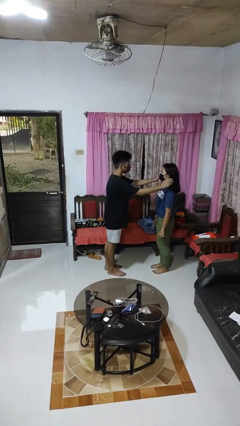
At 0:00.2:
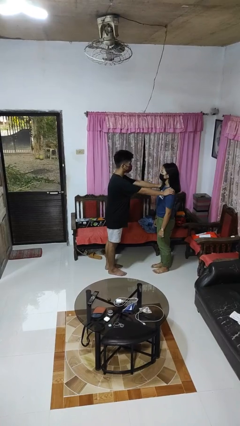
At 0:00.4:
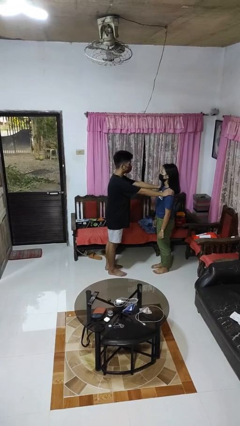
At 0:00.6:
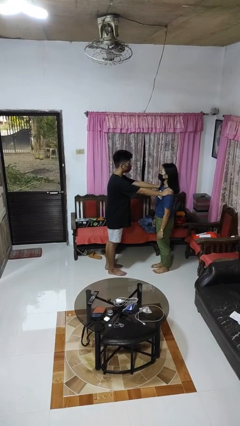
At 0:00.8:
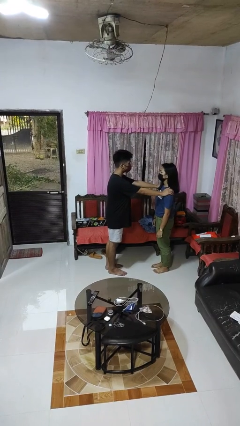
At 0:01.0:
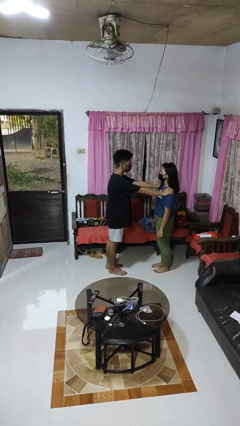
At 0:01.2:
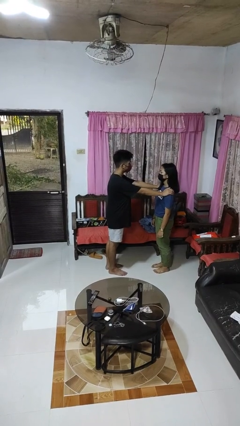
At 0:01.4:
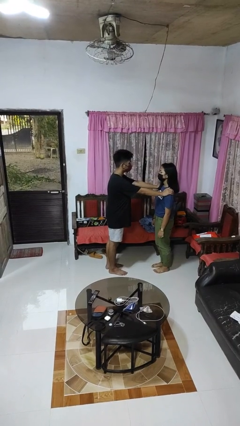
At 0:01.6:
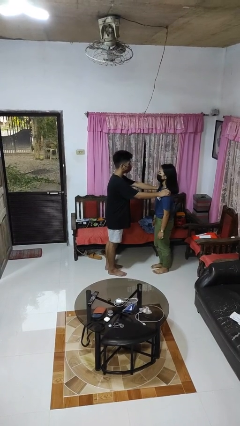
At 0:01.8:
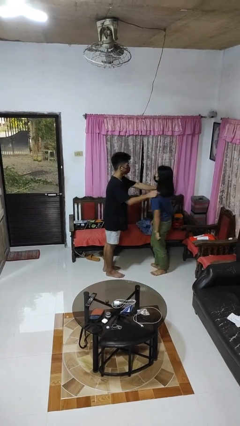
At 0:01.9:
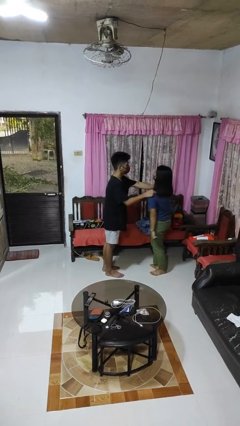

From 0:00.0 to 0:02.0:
person grabs person by shoulder

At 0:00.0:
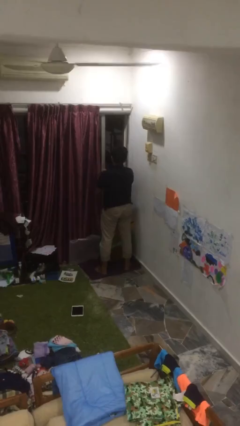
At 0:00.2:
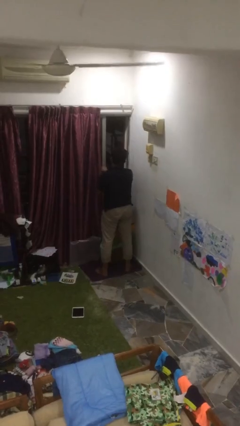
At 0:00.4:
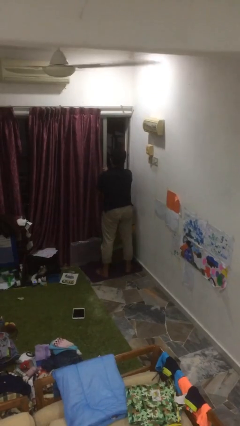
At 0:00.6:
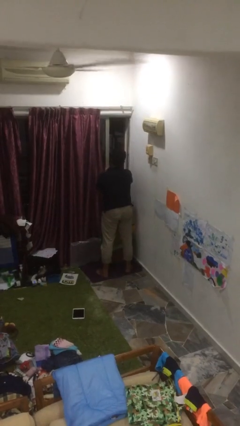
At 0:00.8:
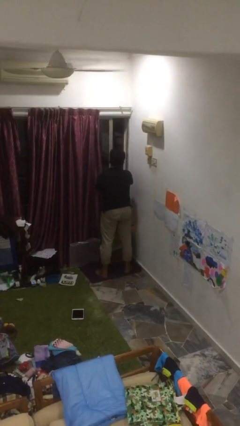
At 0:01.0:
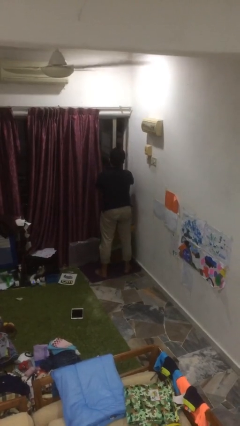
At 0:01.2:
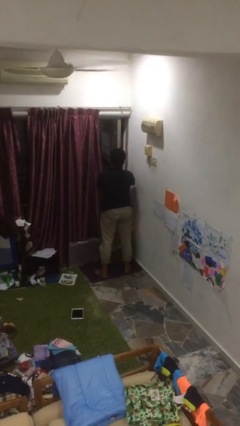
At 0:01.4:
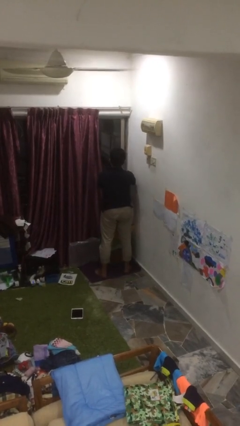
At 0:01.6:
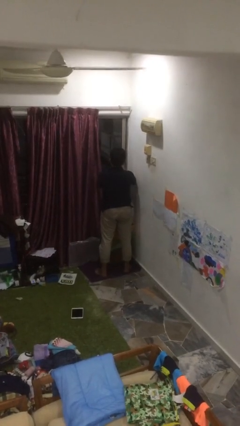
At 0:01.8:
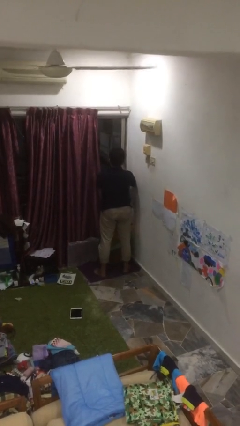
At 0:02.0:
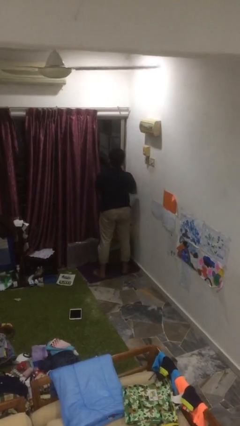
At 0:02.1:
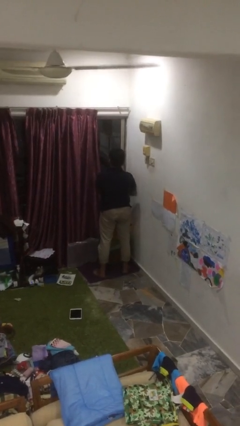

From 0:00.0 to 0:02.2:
person closes home window

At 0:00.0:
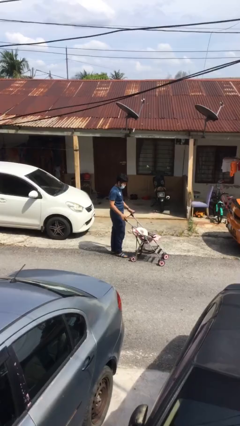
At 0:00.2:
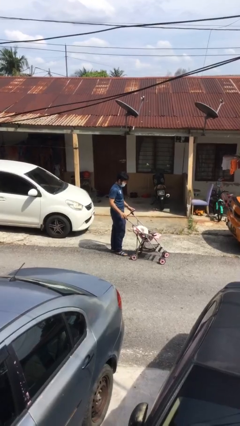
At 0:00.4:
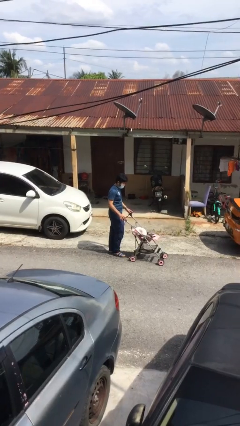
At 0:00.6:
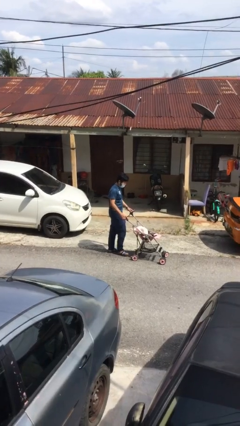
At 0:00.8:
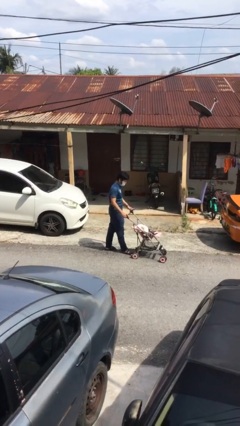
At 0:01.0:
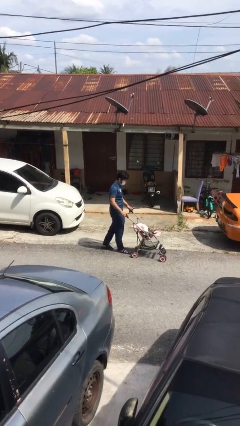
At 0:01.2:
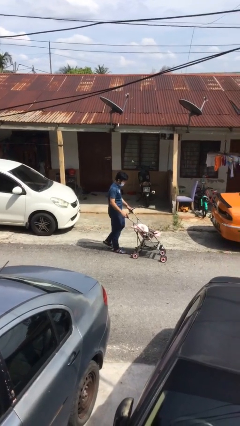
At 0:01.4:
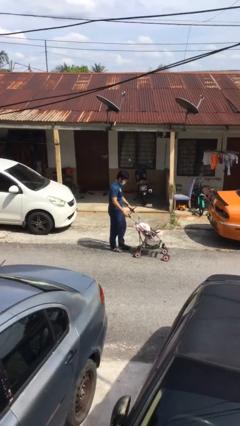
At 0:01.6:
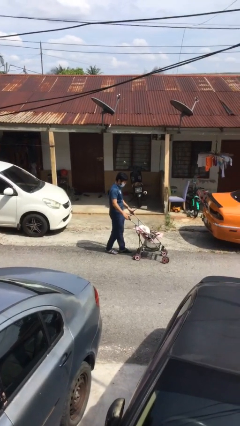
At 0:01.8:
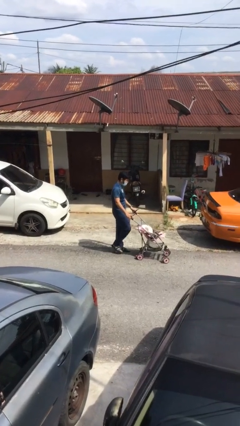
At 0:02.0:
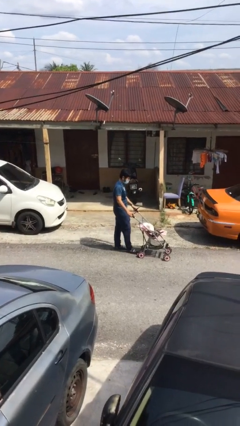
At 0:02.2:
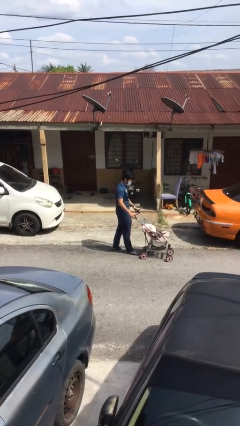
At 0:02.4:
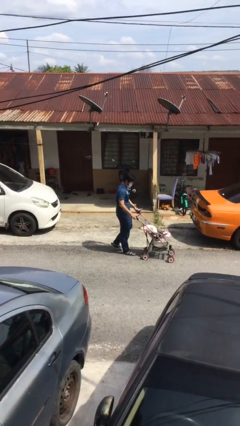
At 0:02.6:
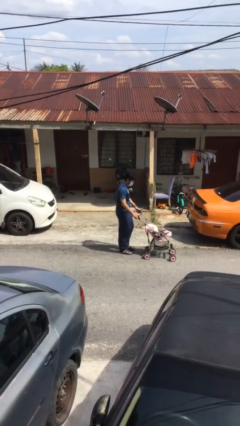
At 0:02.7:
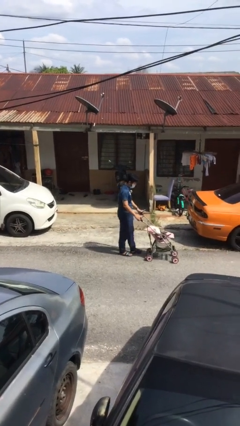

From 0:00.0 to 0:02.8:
person pushes wheeled cart

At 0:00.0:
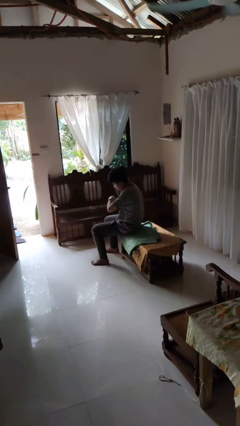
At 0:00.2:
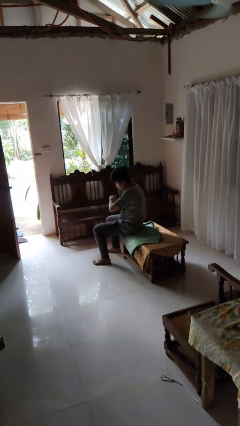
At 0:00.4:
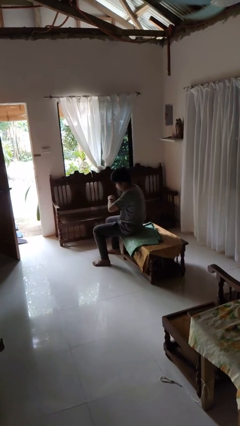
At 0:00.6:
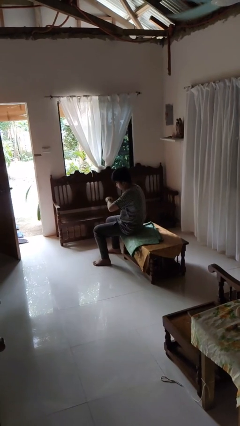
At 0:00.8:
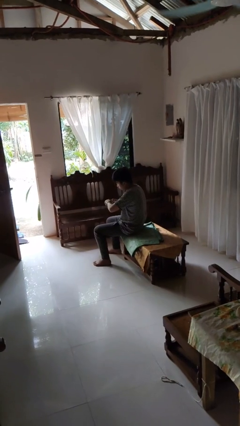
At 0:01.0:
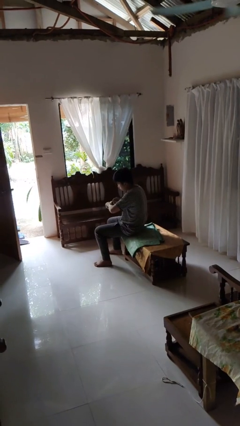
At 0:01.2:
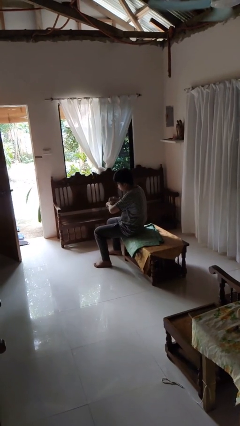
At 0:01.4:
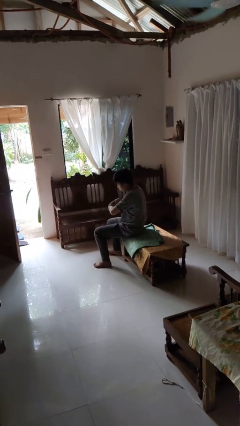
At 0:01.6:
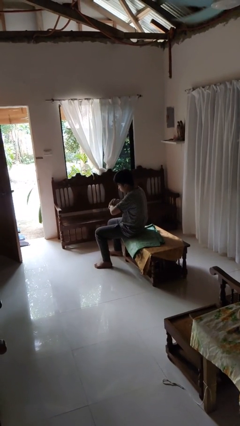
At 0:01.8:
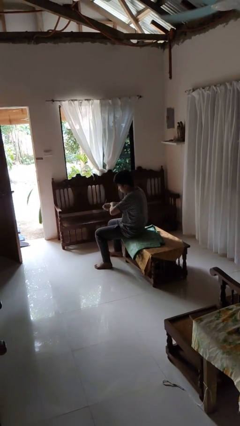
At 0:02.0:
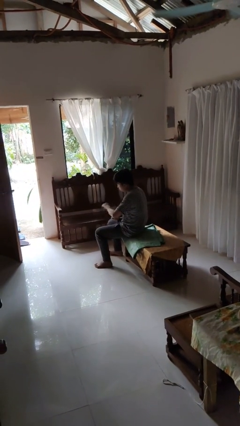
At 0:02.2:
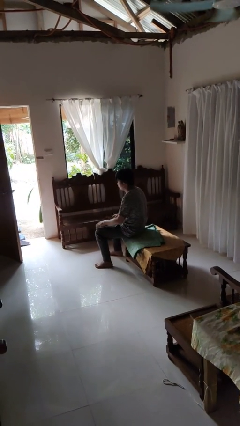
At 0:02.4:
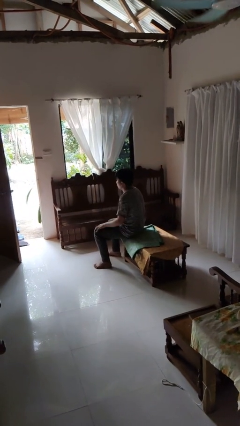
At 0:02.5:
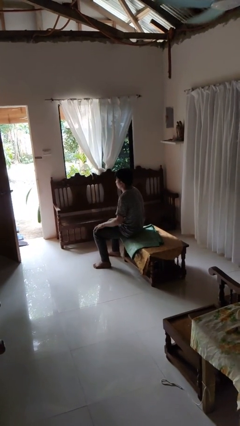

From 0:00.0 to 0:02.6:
person takes off wristwatch

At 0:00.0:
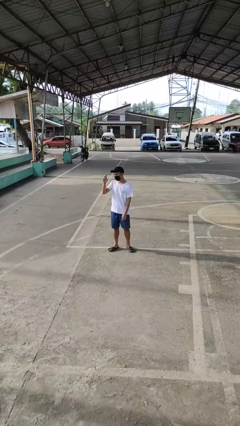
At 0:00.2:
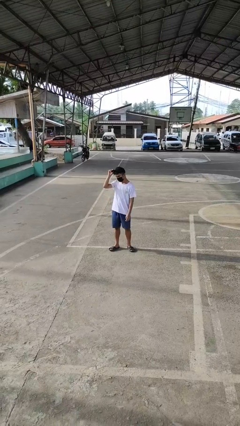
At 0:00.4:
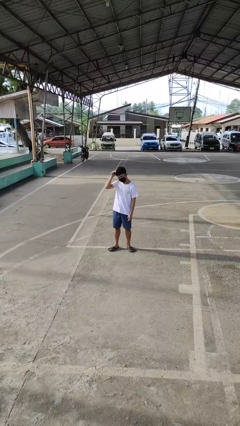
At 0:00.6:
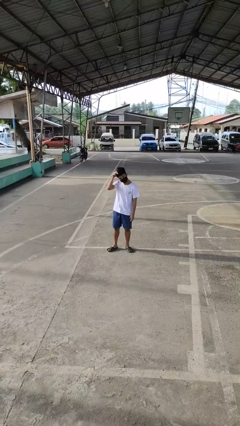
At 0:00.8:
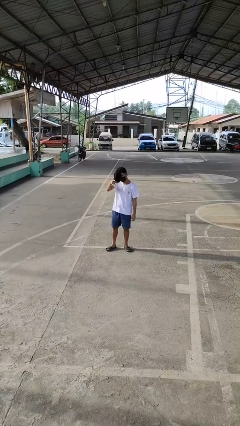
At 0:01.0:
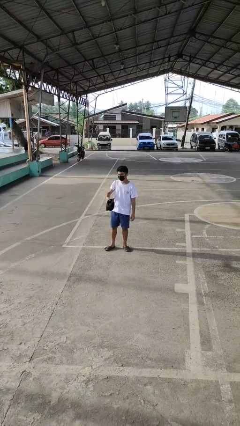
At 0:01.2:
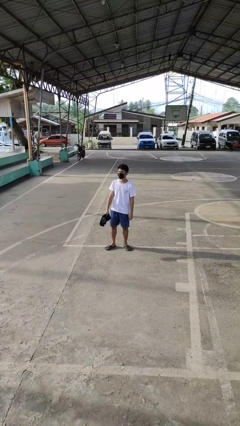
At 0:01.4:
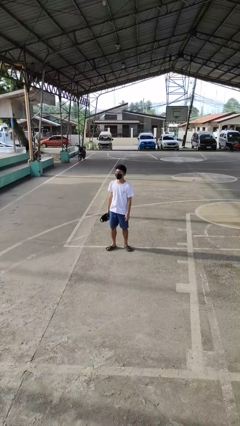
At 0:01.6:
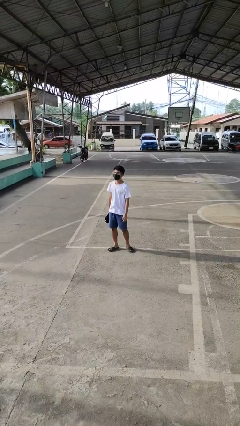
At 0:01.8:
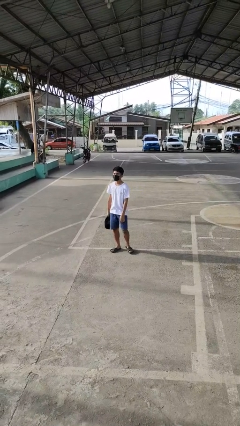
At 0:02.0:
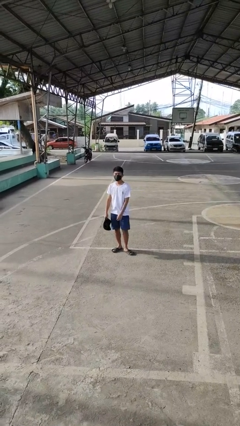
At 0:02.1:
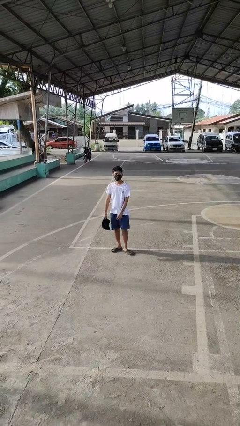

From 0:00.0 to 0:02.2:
person takes off hat

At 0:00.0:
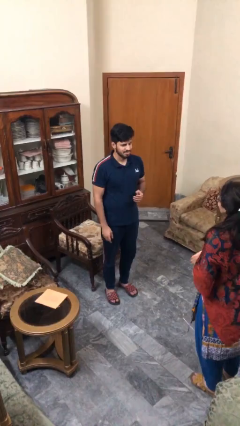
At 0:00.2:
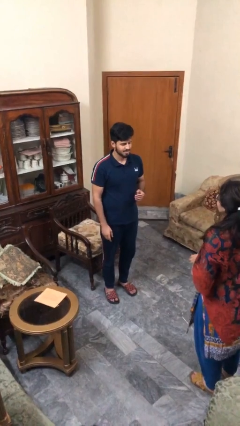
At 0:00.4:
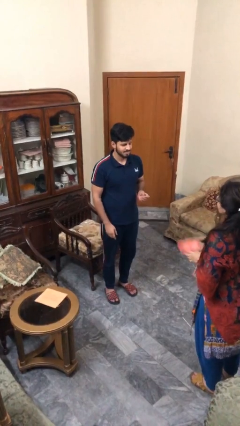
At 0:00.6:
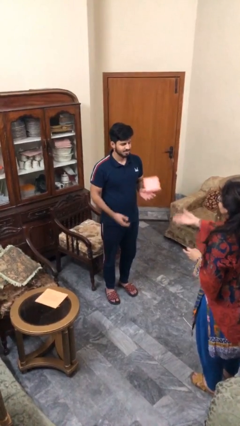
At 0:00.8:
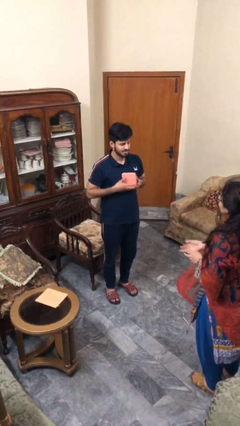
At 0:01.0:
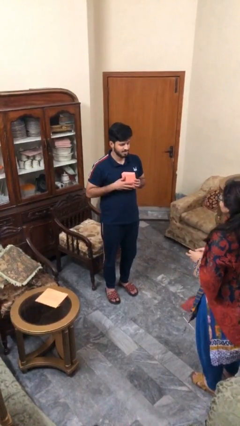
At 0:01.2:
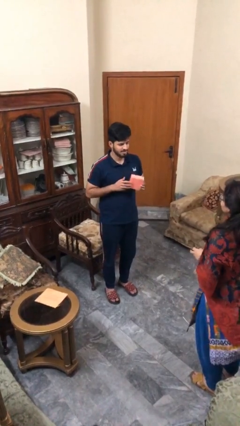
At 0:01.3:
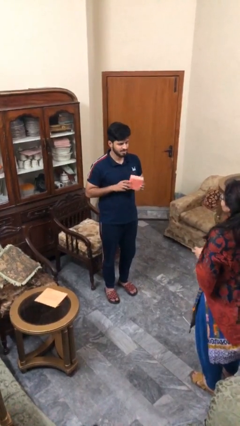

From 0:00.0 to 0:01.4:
person catches object from person

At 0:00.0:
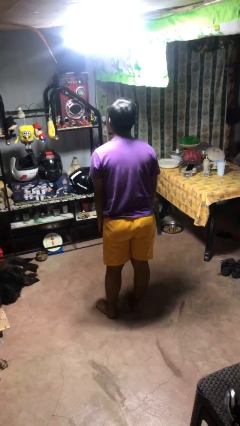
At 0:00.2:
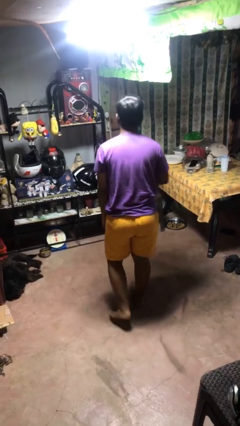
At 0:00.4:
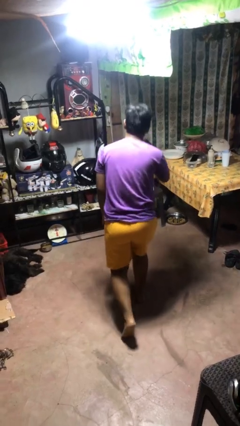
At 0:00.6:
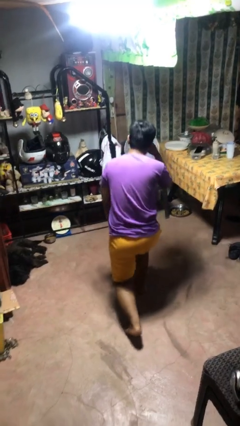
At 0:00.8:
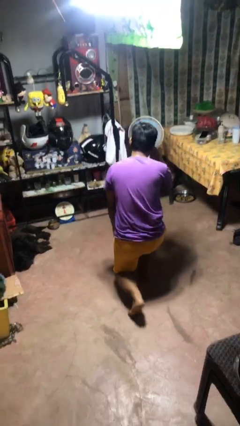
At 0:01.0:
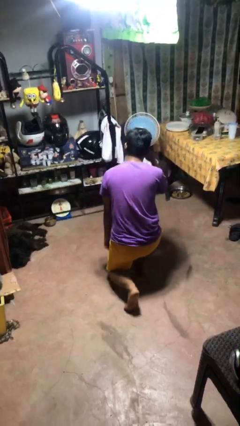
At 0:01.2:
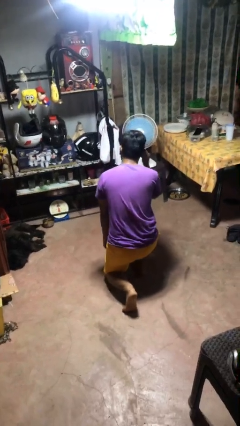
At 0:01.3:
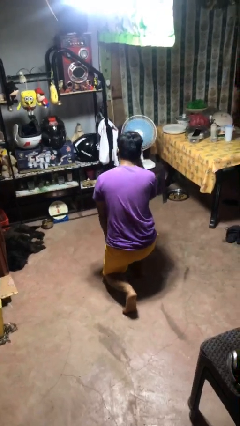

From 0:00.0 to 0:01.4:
person kneels

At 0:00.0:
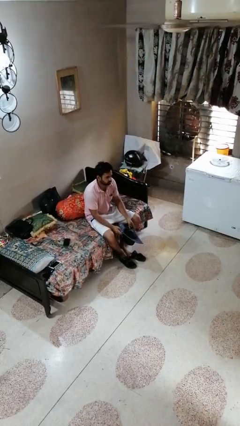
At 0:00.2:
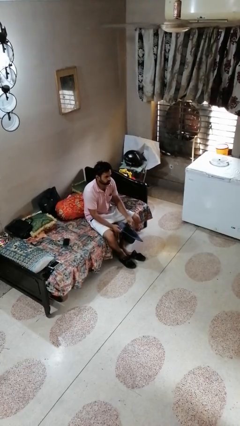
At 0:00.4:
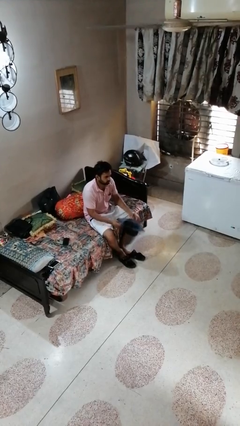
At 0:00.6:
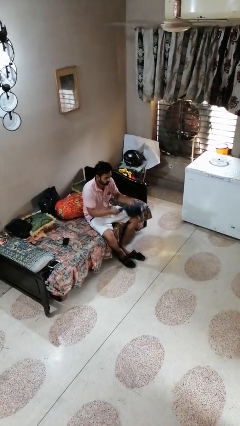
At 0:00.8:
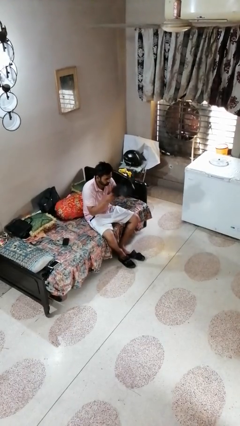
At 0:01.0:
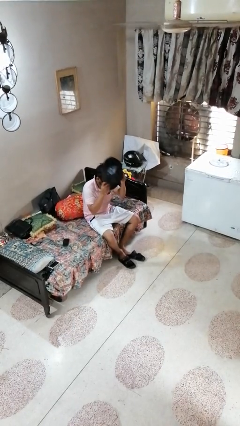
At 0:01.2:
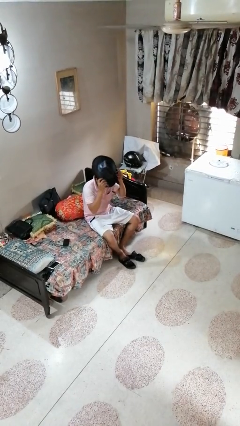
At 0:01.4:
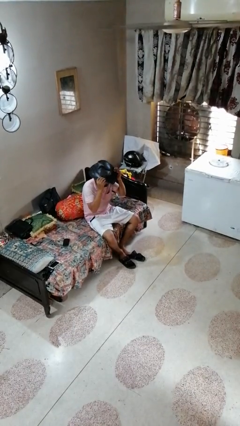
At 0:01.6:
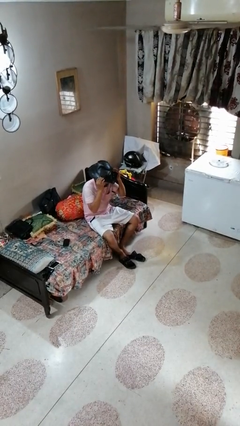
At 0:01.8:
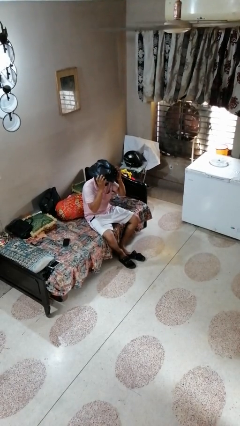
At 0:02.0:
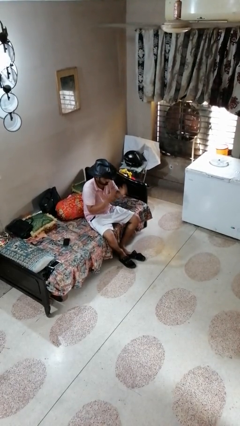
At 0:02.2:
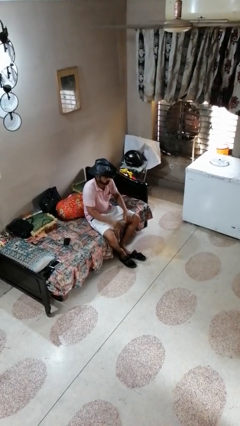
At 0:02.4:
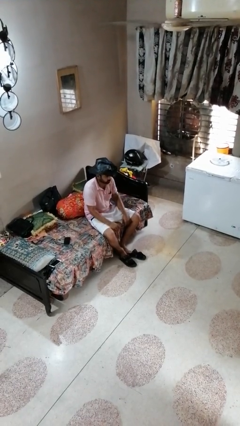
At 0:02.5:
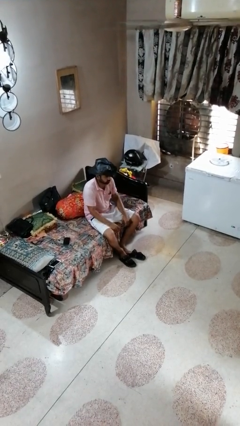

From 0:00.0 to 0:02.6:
person puts on hat
